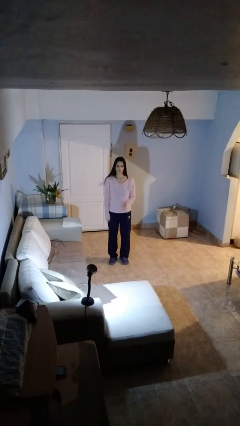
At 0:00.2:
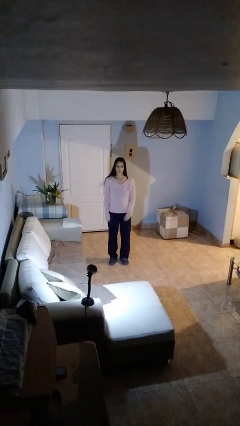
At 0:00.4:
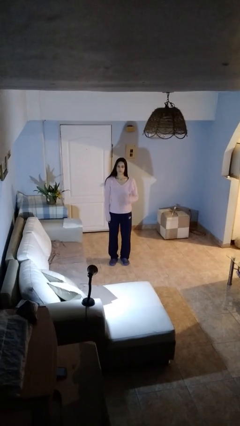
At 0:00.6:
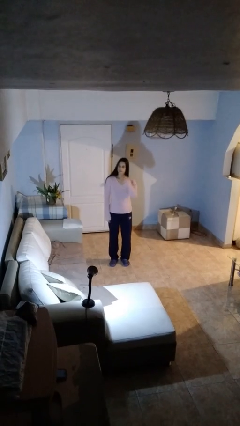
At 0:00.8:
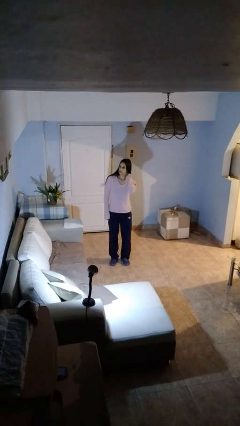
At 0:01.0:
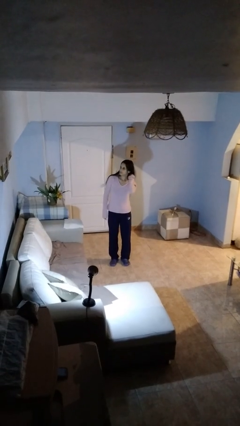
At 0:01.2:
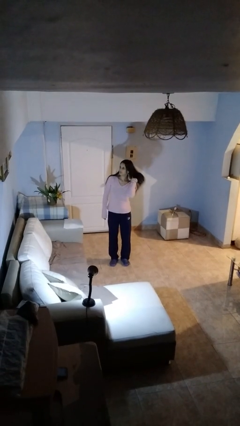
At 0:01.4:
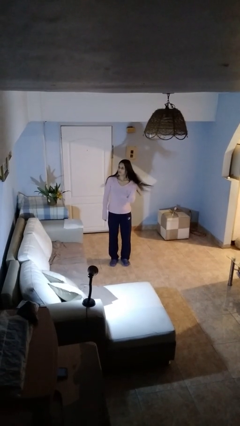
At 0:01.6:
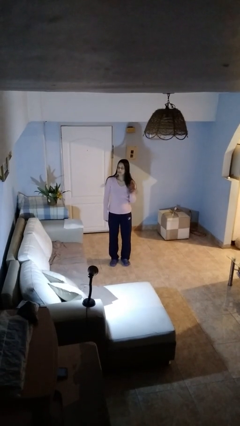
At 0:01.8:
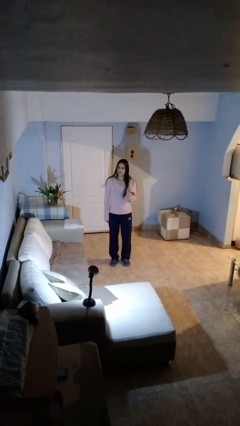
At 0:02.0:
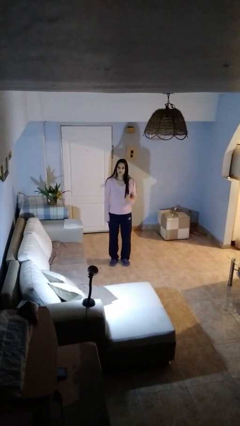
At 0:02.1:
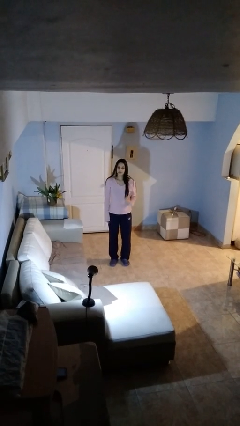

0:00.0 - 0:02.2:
person strokes hair

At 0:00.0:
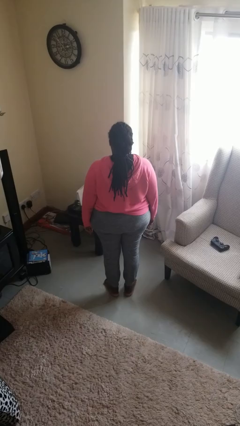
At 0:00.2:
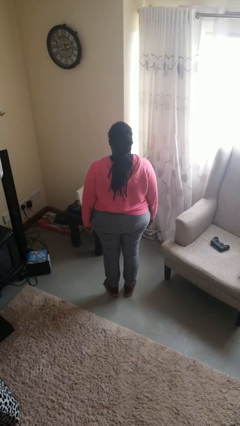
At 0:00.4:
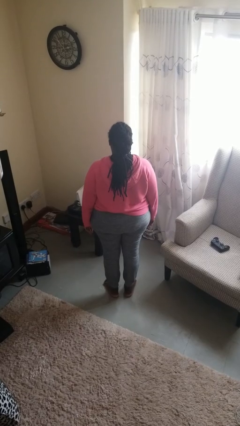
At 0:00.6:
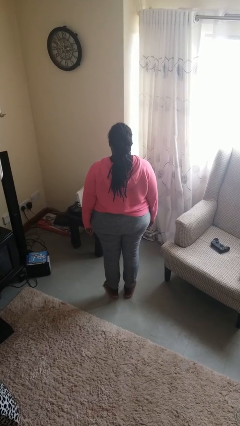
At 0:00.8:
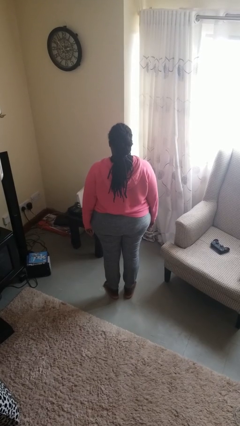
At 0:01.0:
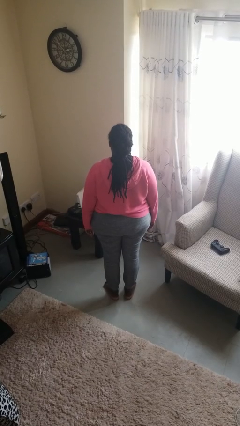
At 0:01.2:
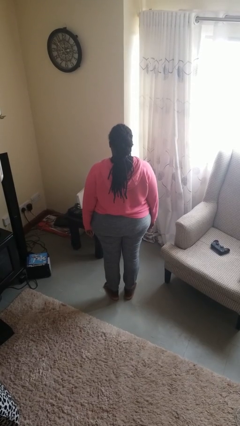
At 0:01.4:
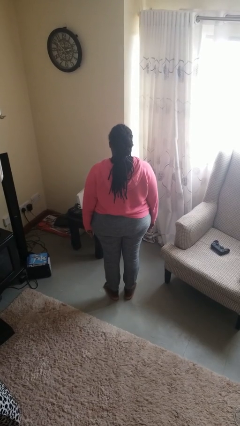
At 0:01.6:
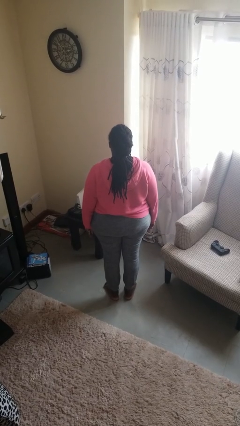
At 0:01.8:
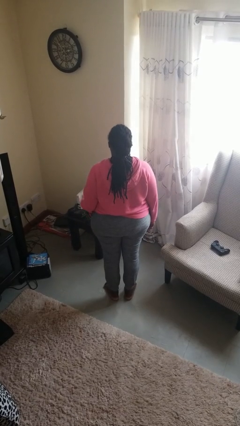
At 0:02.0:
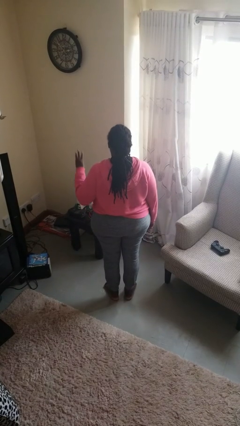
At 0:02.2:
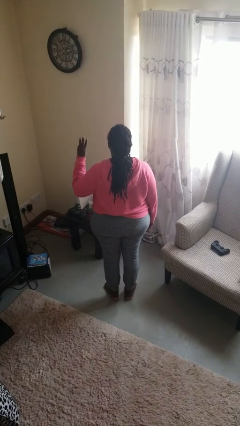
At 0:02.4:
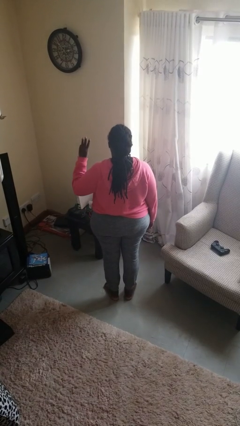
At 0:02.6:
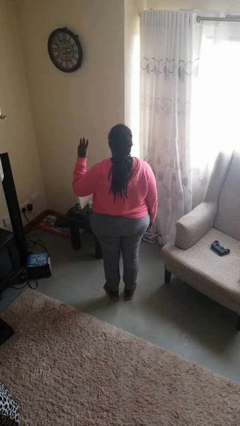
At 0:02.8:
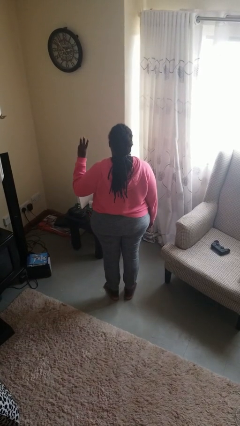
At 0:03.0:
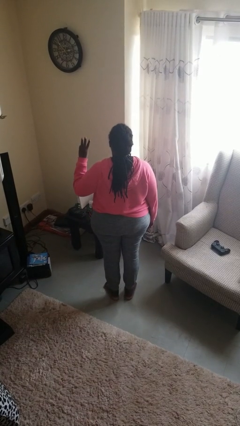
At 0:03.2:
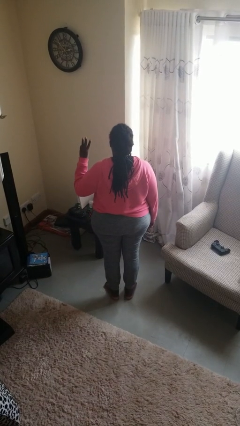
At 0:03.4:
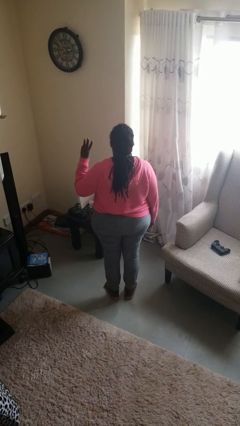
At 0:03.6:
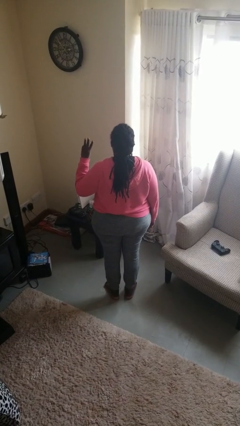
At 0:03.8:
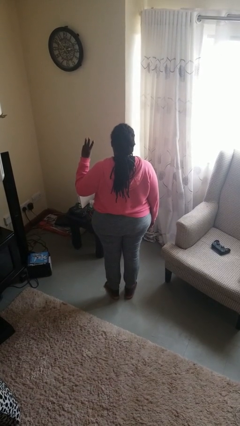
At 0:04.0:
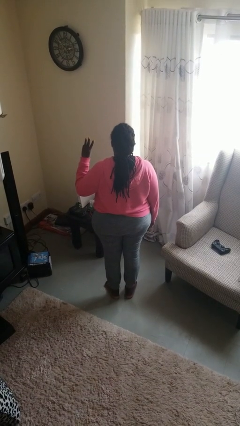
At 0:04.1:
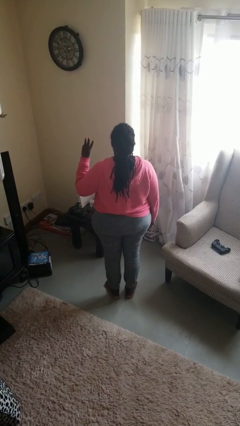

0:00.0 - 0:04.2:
person gestures number three

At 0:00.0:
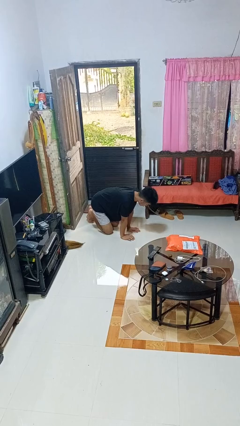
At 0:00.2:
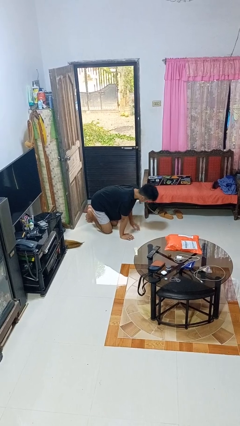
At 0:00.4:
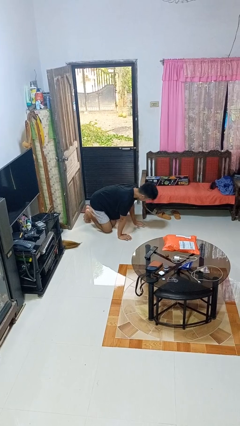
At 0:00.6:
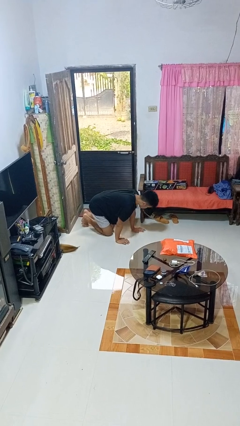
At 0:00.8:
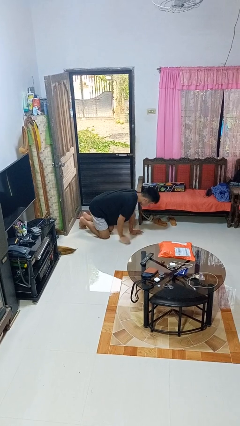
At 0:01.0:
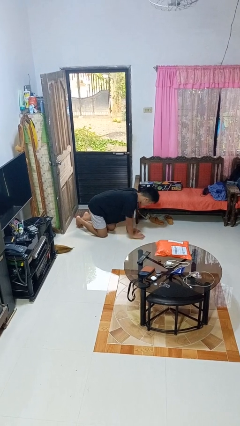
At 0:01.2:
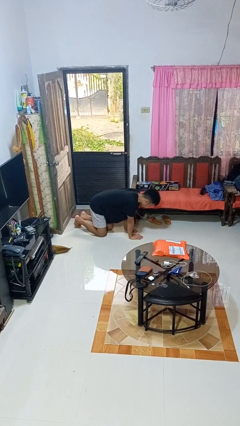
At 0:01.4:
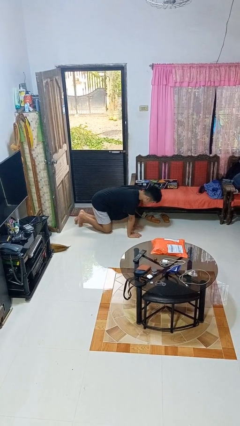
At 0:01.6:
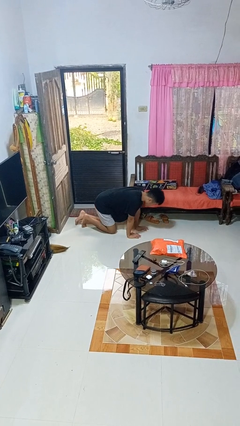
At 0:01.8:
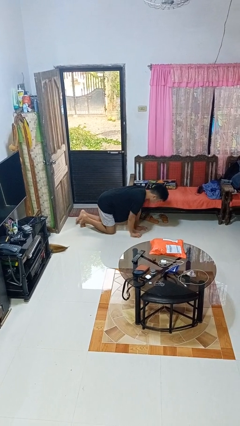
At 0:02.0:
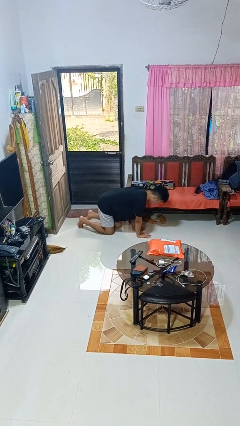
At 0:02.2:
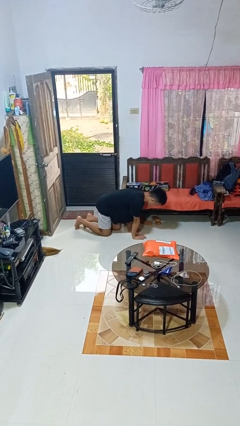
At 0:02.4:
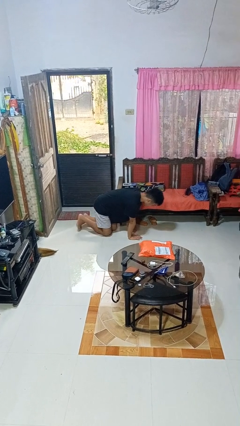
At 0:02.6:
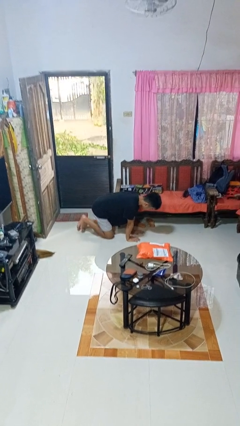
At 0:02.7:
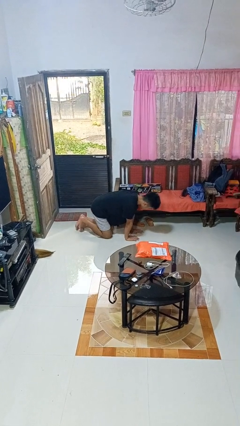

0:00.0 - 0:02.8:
person crawls

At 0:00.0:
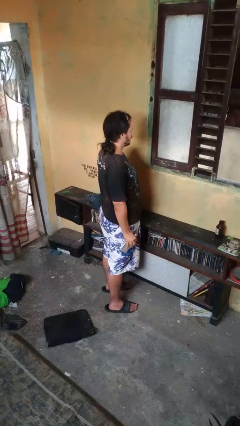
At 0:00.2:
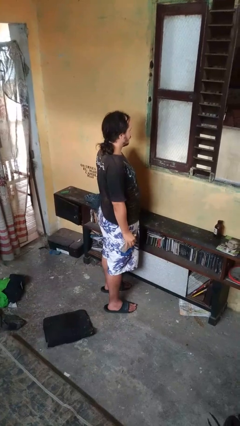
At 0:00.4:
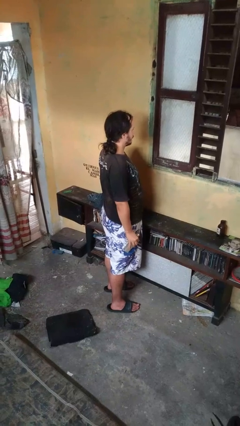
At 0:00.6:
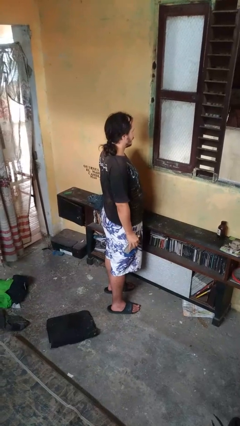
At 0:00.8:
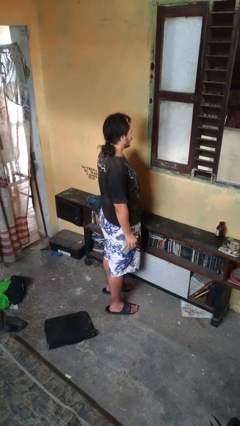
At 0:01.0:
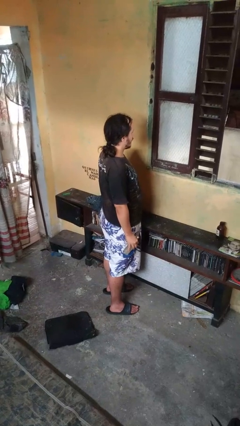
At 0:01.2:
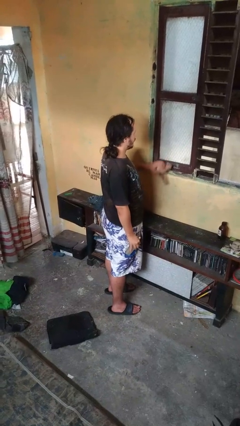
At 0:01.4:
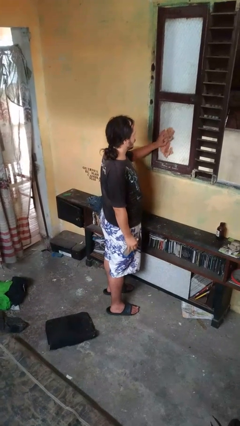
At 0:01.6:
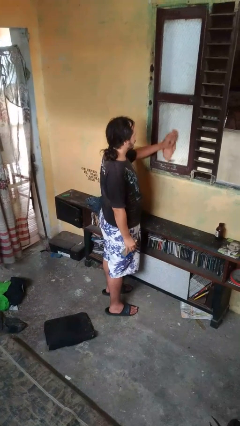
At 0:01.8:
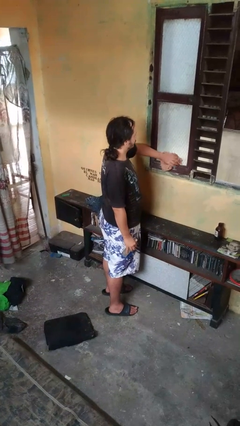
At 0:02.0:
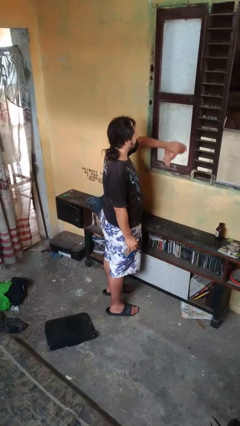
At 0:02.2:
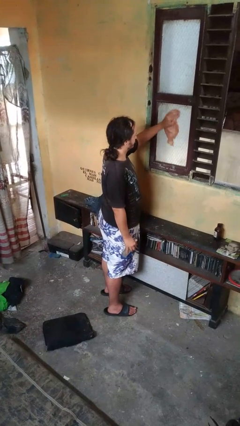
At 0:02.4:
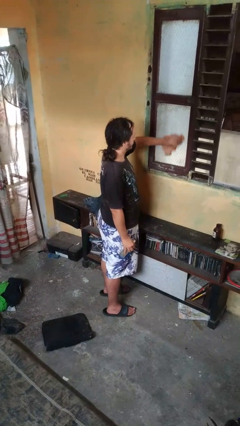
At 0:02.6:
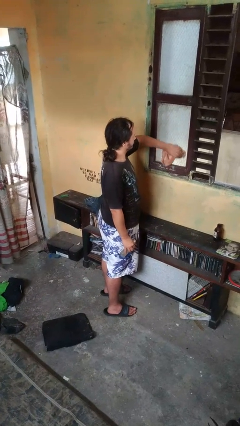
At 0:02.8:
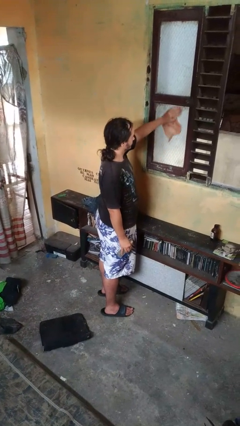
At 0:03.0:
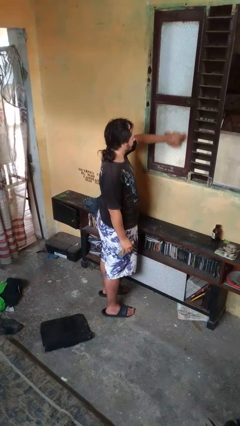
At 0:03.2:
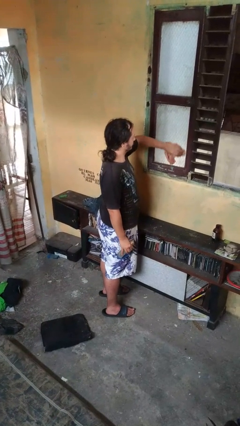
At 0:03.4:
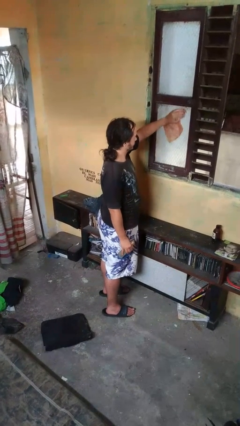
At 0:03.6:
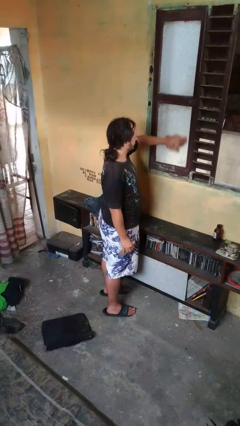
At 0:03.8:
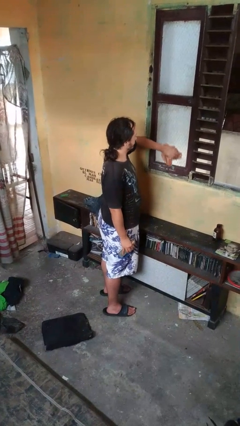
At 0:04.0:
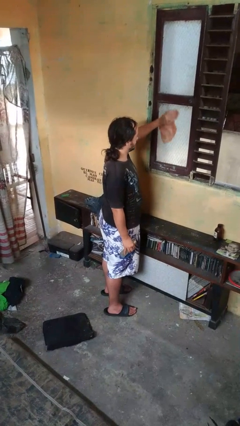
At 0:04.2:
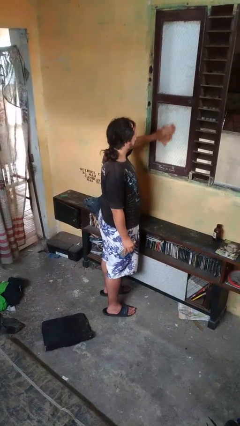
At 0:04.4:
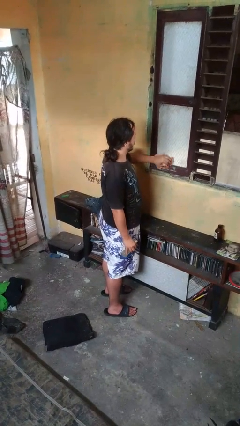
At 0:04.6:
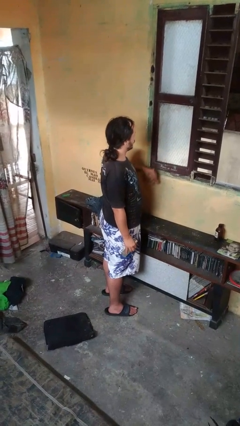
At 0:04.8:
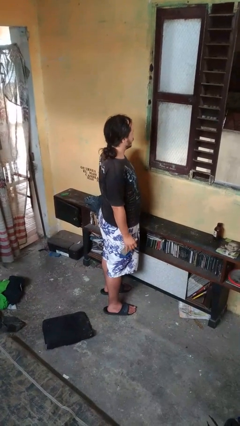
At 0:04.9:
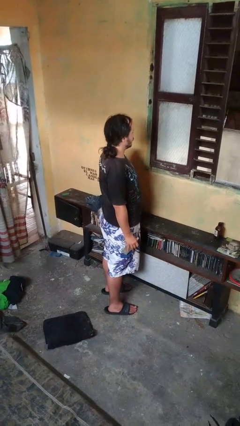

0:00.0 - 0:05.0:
person washes window

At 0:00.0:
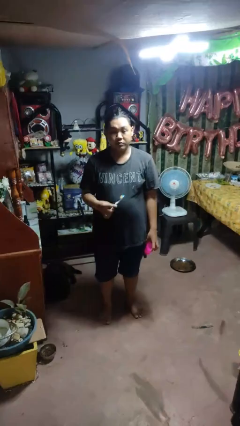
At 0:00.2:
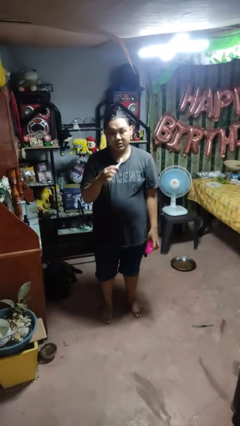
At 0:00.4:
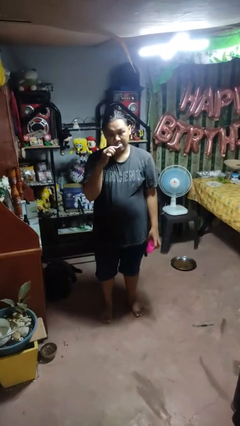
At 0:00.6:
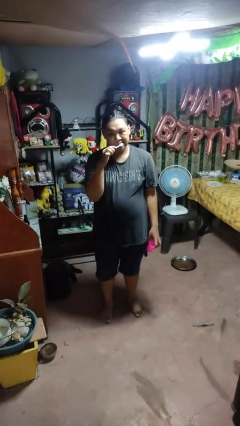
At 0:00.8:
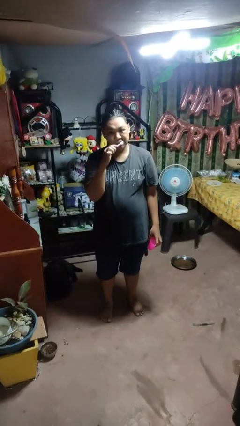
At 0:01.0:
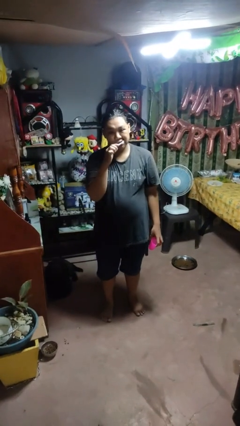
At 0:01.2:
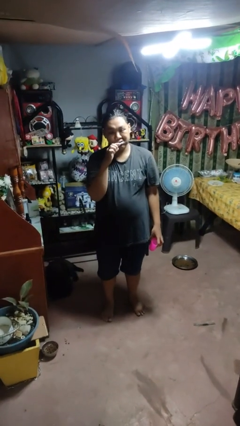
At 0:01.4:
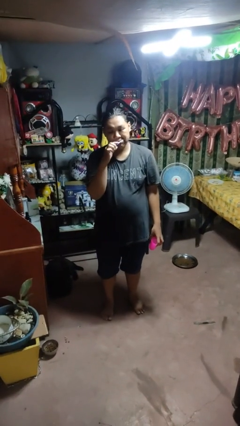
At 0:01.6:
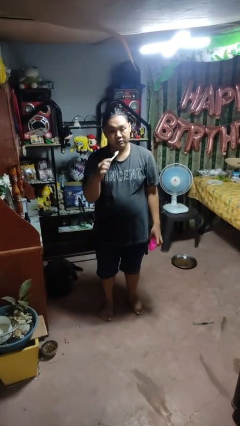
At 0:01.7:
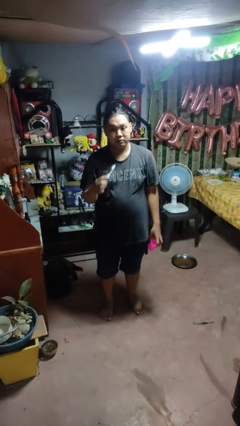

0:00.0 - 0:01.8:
person brushes teeth

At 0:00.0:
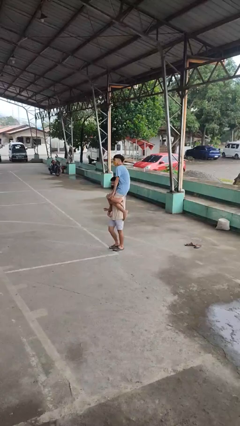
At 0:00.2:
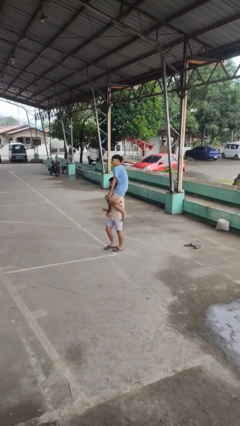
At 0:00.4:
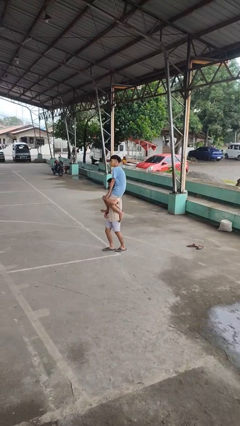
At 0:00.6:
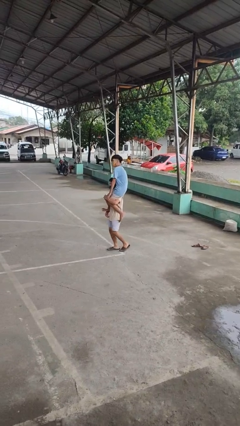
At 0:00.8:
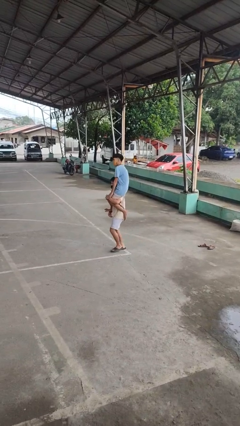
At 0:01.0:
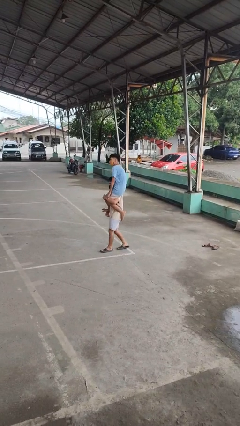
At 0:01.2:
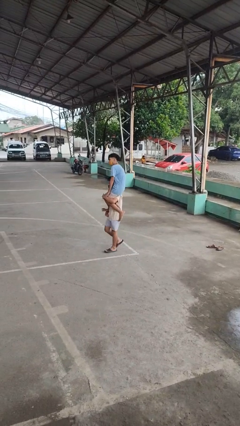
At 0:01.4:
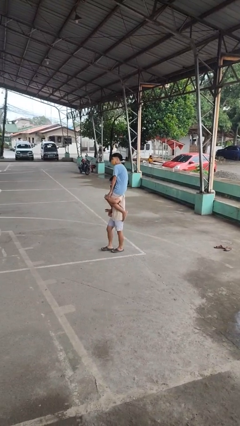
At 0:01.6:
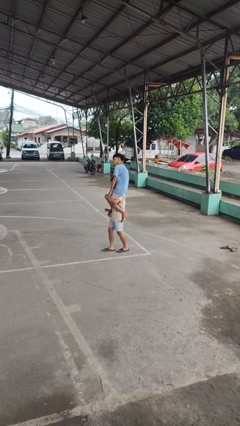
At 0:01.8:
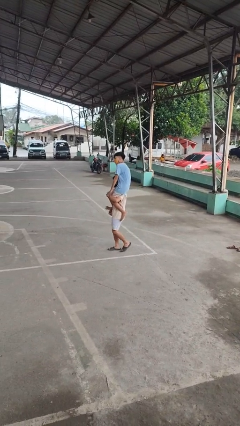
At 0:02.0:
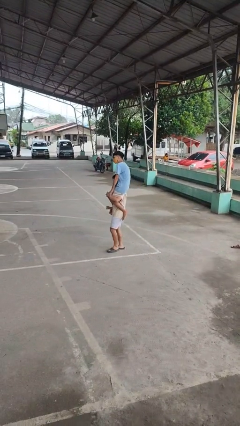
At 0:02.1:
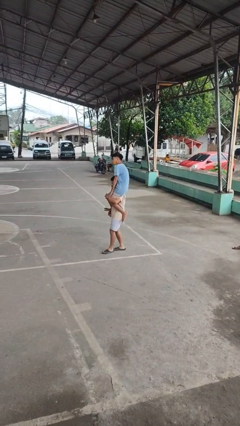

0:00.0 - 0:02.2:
person carries person on shoulders
